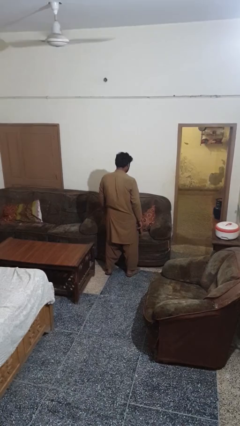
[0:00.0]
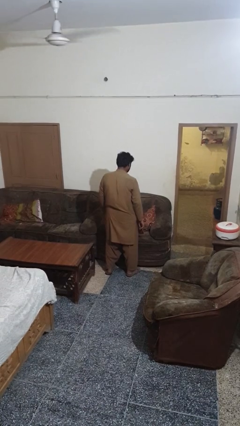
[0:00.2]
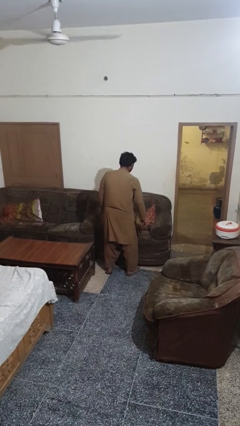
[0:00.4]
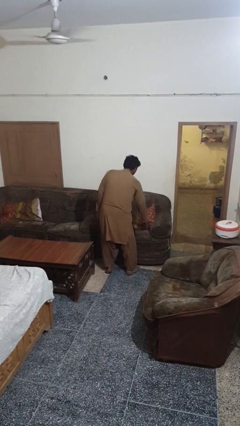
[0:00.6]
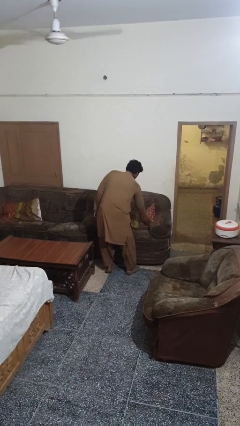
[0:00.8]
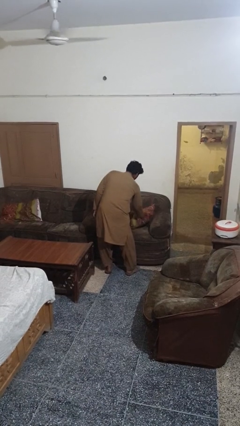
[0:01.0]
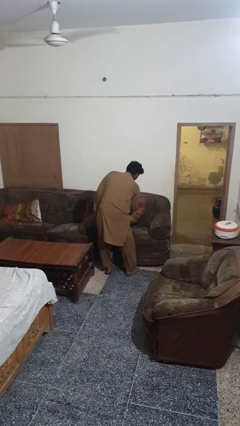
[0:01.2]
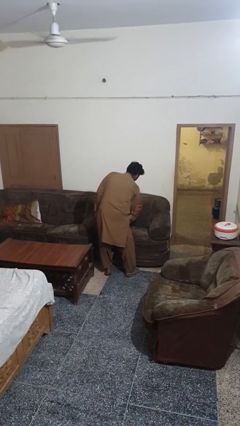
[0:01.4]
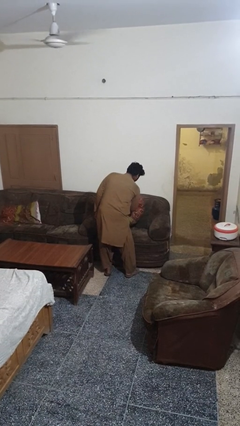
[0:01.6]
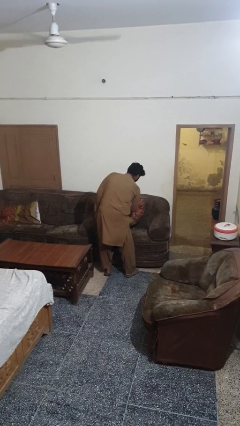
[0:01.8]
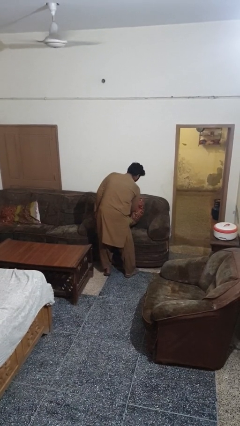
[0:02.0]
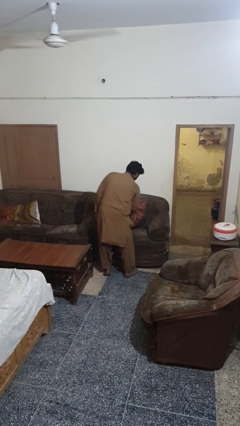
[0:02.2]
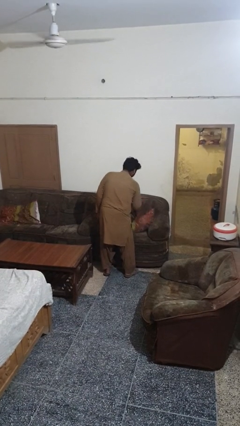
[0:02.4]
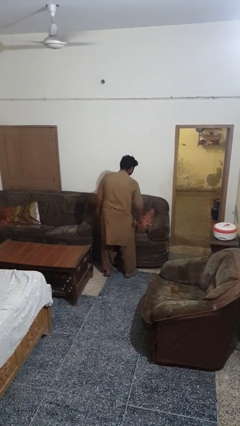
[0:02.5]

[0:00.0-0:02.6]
person searches in couch

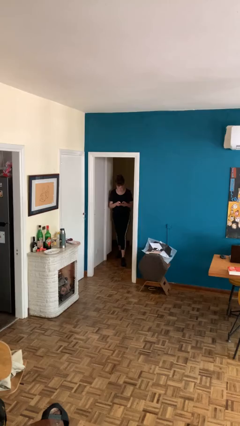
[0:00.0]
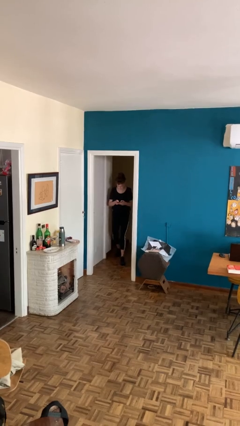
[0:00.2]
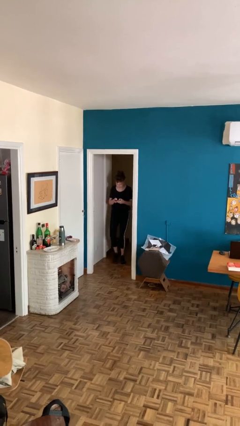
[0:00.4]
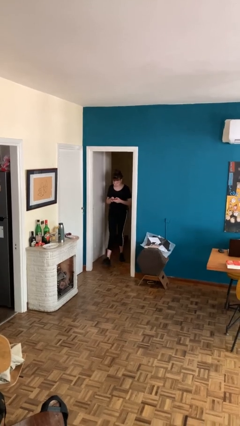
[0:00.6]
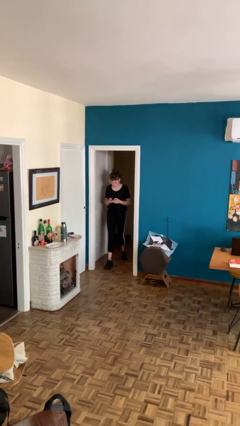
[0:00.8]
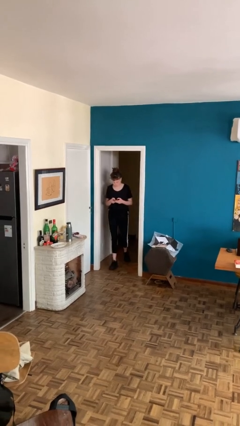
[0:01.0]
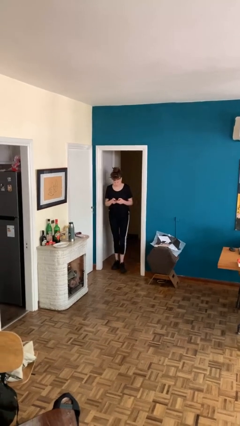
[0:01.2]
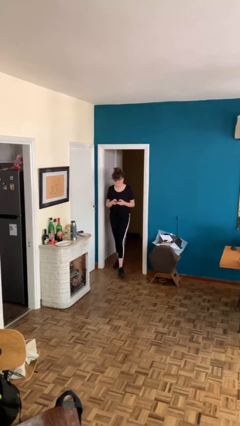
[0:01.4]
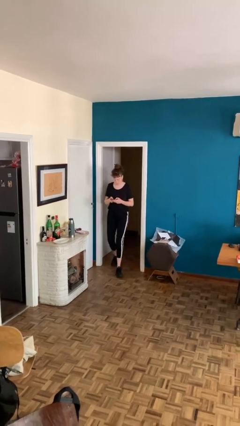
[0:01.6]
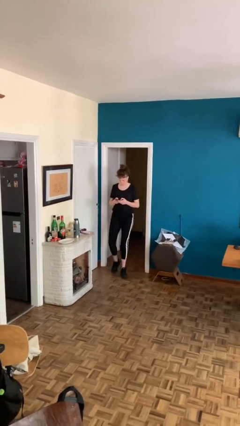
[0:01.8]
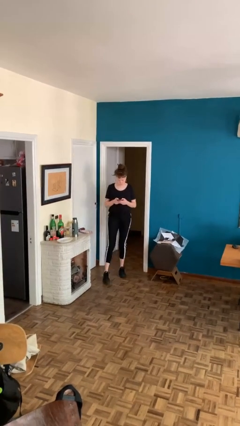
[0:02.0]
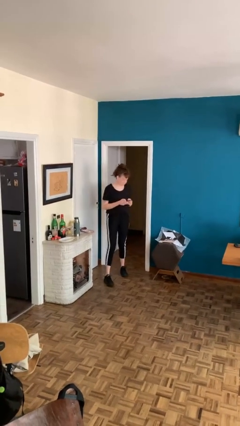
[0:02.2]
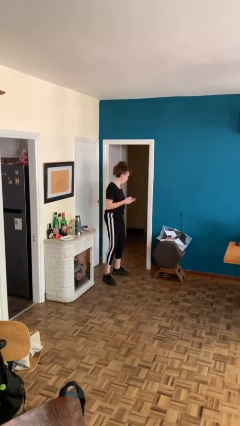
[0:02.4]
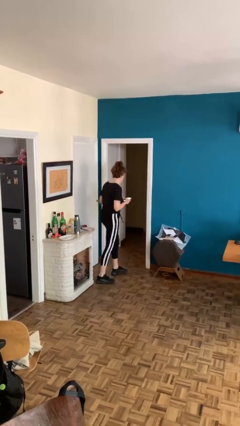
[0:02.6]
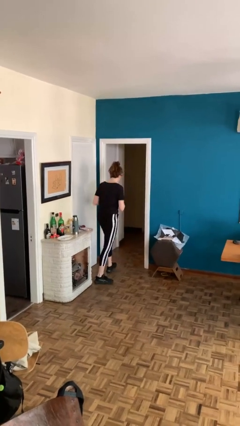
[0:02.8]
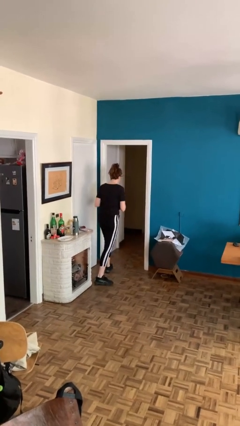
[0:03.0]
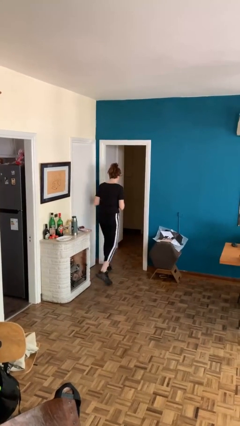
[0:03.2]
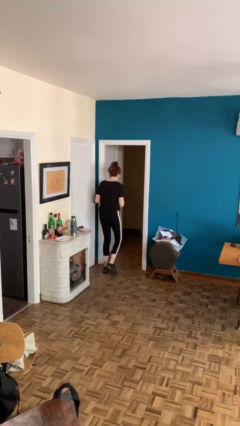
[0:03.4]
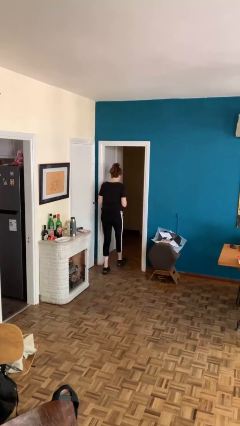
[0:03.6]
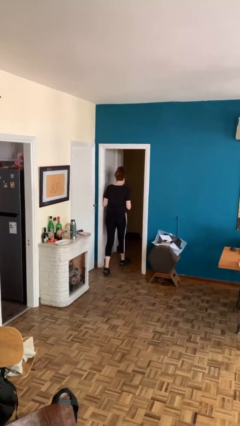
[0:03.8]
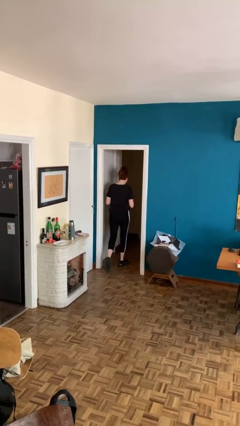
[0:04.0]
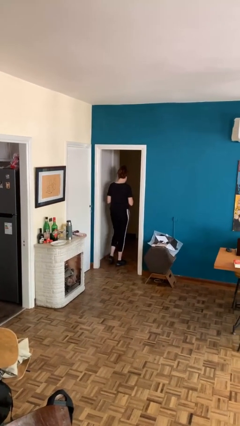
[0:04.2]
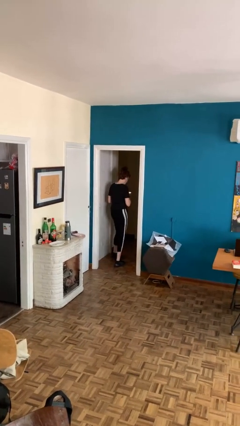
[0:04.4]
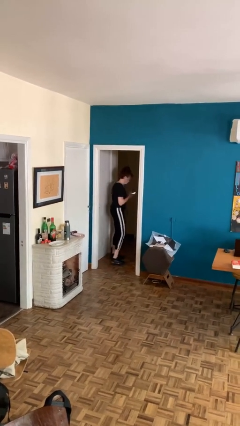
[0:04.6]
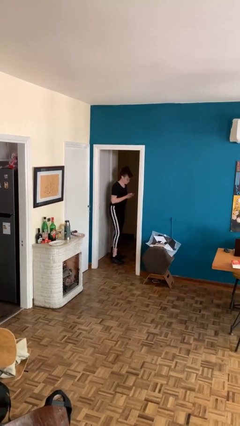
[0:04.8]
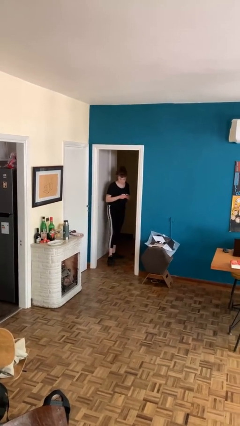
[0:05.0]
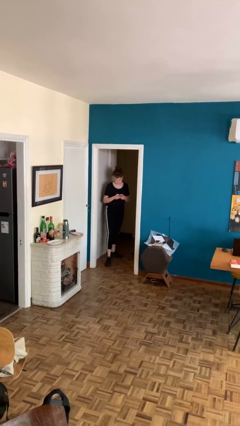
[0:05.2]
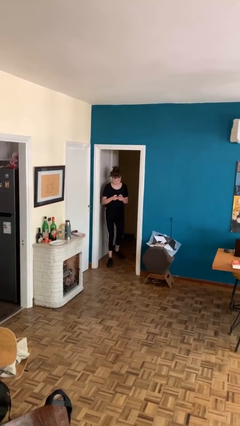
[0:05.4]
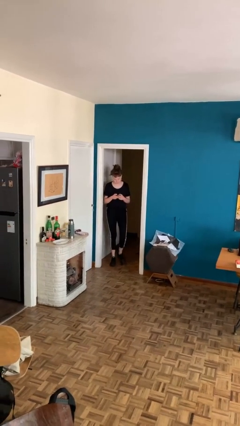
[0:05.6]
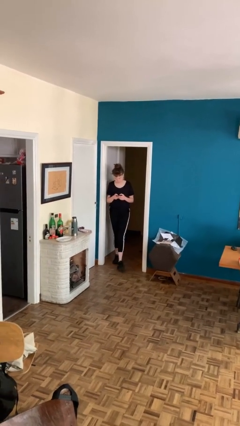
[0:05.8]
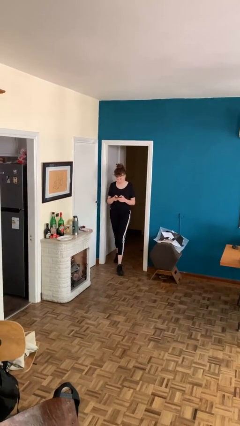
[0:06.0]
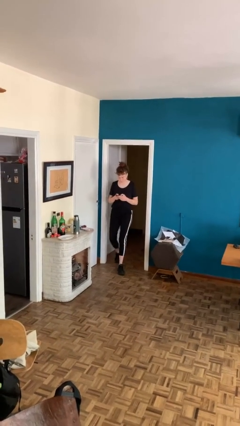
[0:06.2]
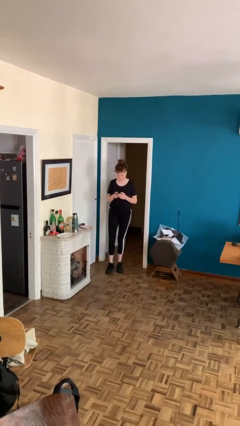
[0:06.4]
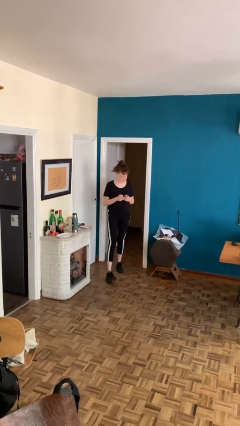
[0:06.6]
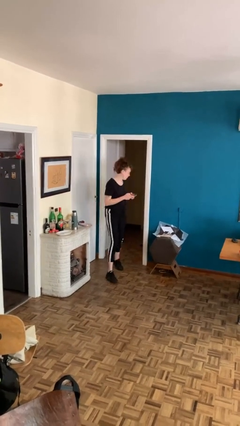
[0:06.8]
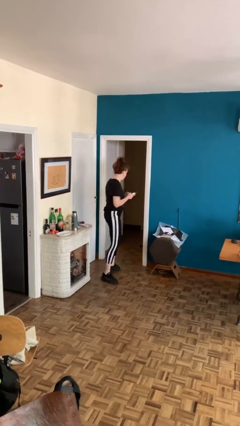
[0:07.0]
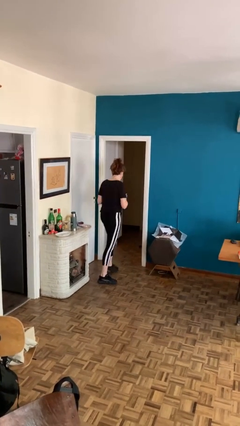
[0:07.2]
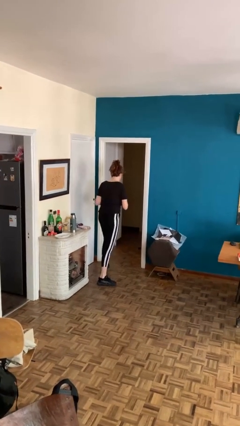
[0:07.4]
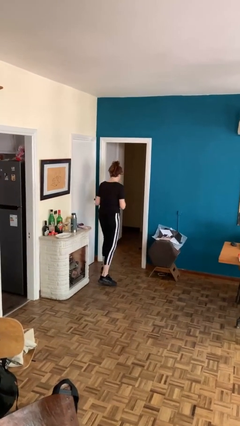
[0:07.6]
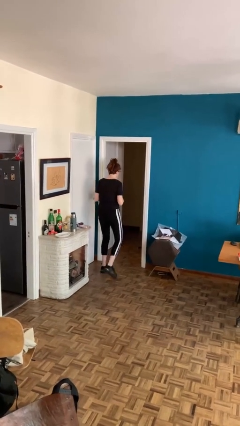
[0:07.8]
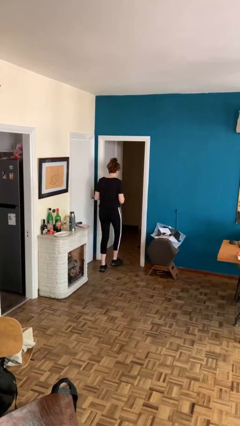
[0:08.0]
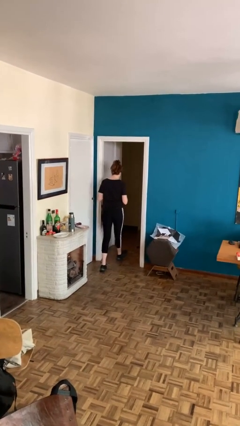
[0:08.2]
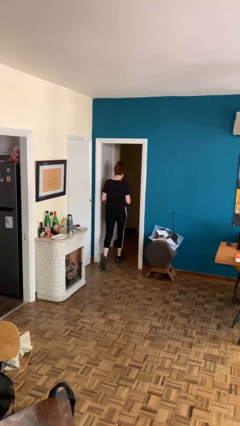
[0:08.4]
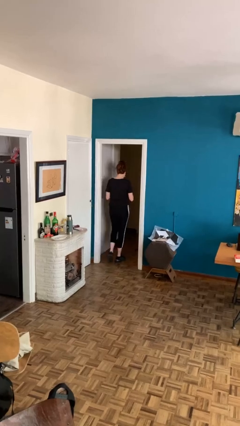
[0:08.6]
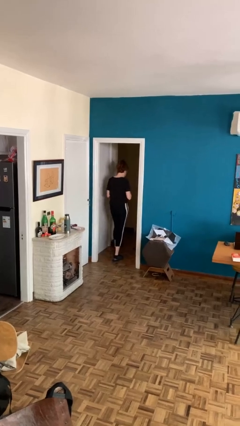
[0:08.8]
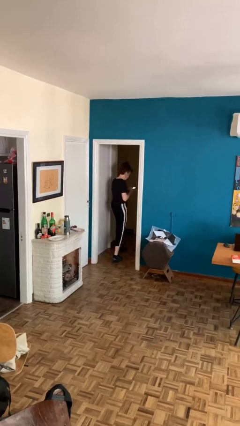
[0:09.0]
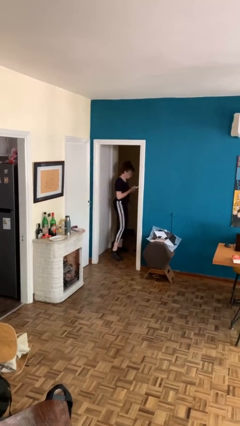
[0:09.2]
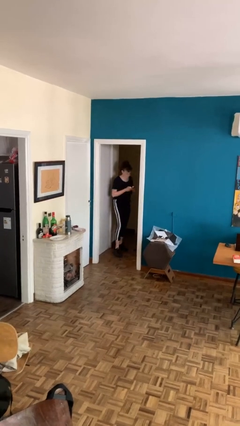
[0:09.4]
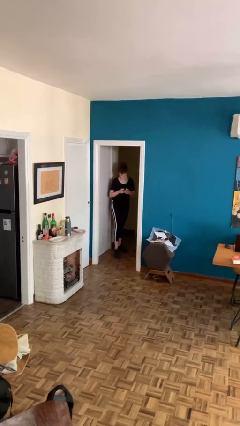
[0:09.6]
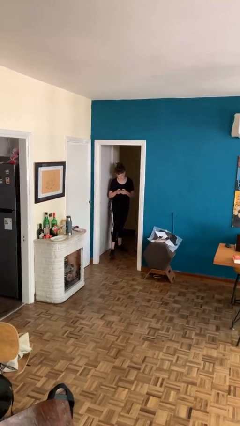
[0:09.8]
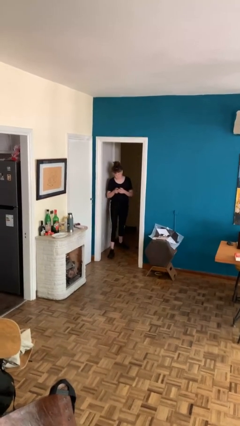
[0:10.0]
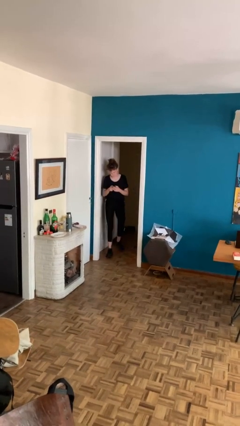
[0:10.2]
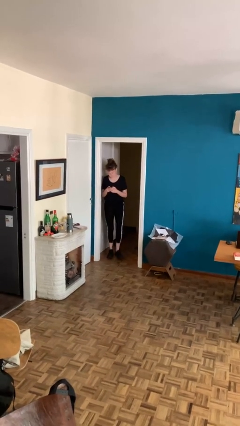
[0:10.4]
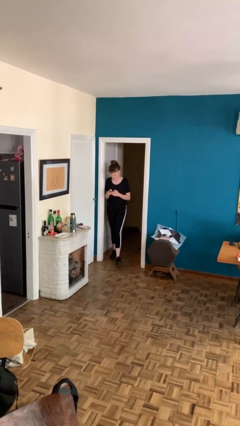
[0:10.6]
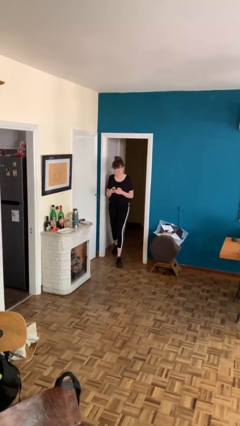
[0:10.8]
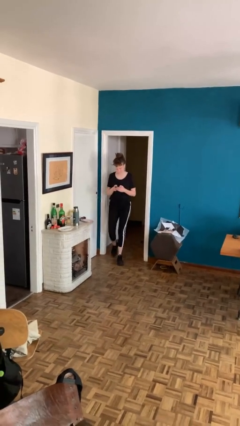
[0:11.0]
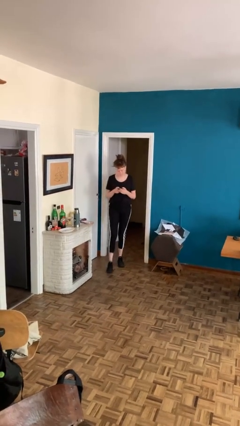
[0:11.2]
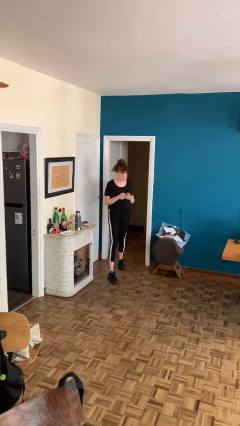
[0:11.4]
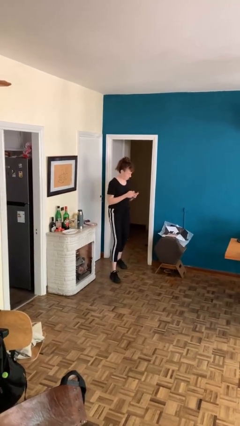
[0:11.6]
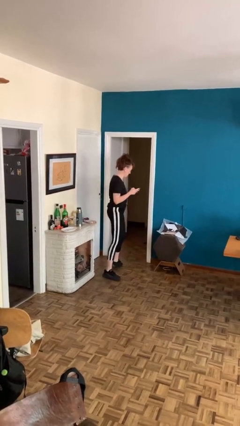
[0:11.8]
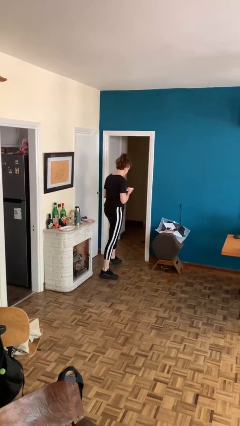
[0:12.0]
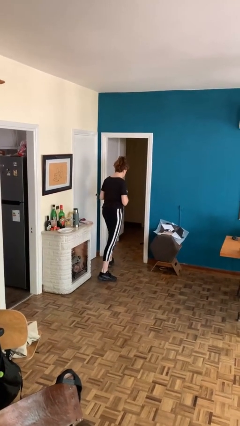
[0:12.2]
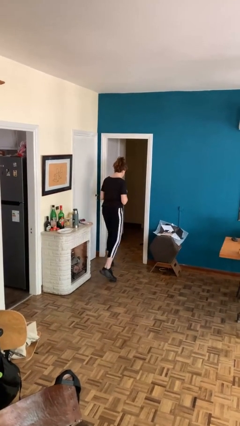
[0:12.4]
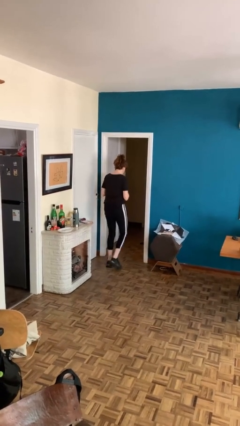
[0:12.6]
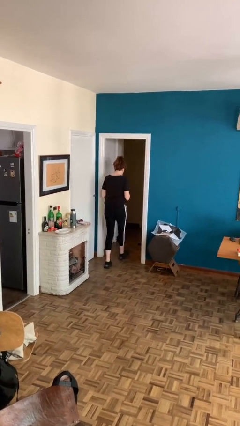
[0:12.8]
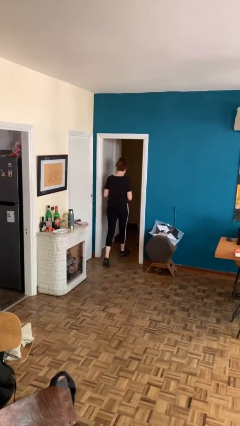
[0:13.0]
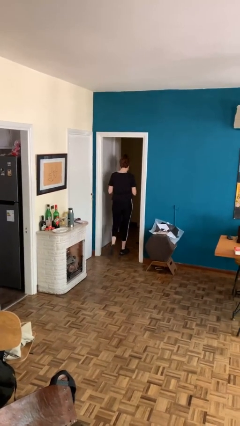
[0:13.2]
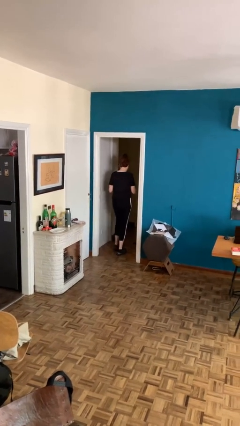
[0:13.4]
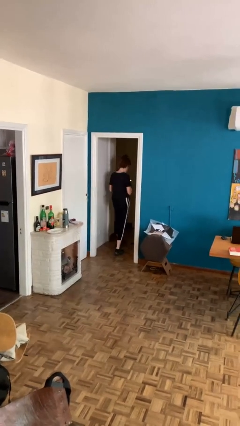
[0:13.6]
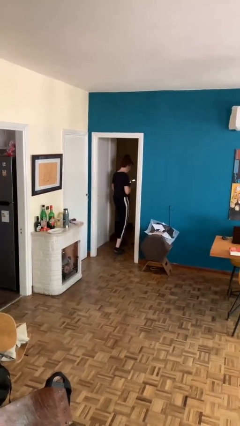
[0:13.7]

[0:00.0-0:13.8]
person texts on phone

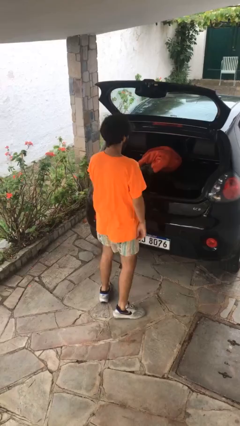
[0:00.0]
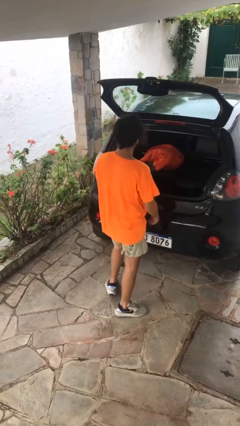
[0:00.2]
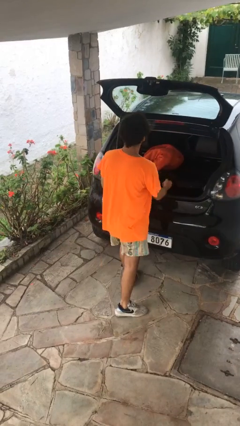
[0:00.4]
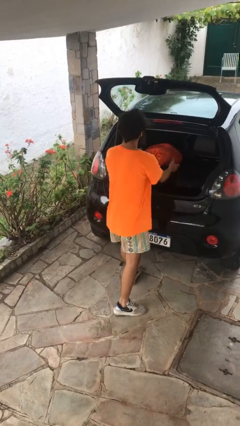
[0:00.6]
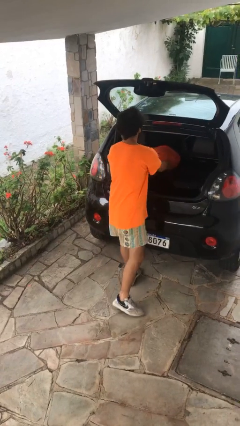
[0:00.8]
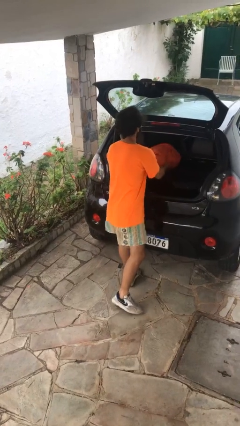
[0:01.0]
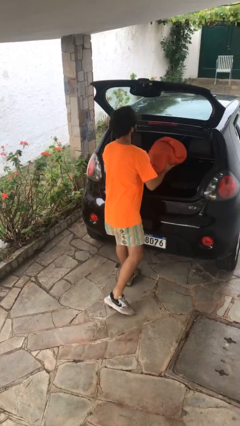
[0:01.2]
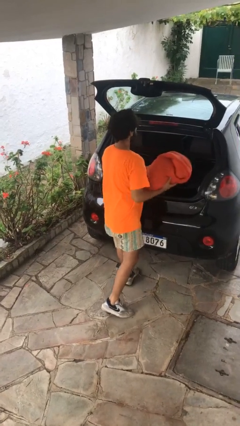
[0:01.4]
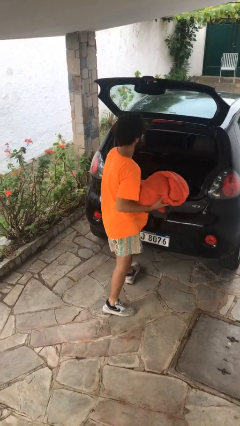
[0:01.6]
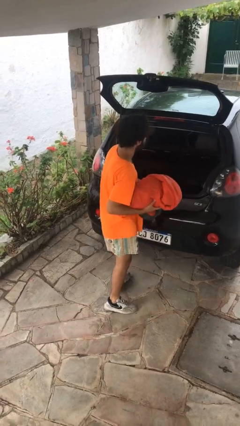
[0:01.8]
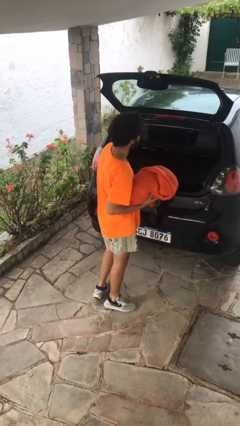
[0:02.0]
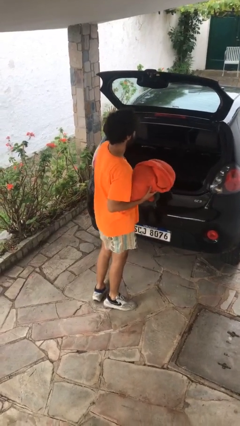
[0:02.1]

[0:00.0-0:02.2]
person unloads car
